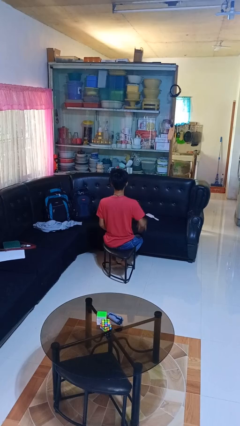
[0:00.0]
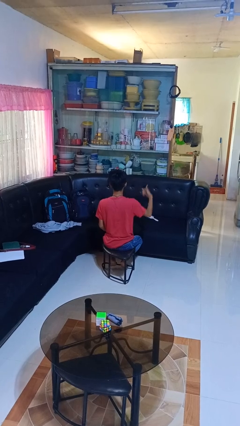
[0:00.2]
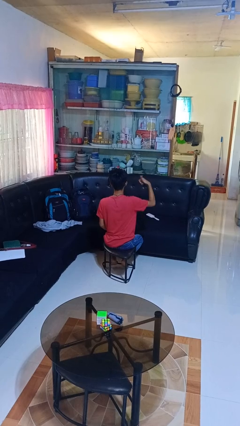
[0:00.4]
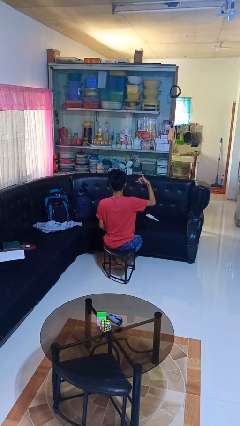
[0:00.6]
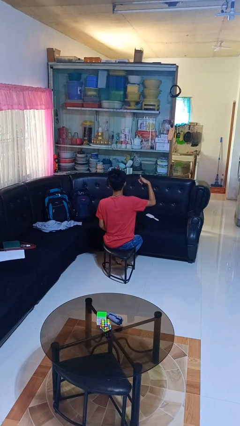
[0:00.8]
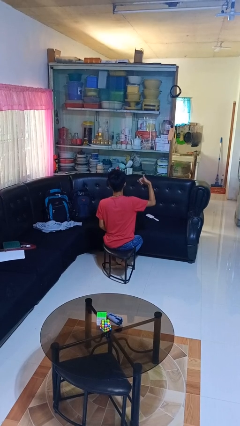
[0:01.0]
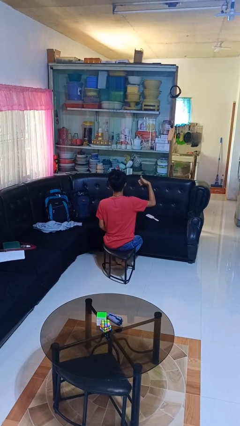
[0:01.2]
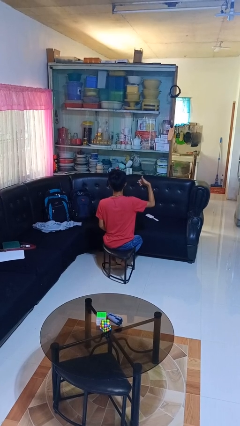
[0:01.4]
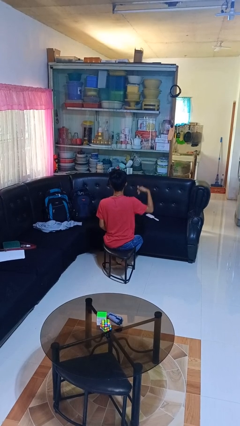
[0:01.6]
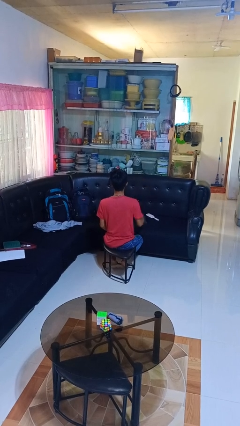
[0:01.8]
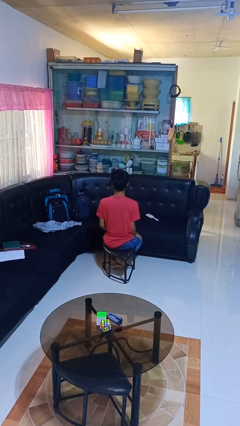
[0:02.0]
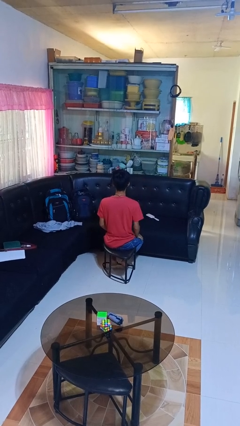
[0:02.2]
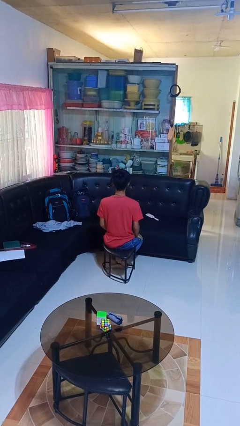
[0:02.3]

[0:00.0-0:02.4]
person gestures hang loose

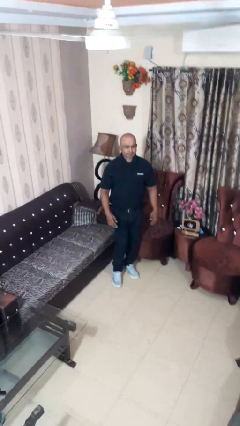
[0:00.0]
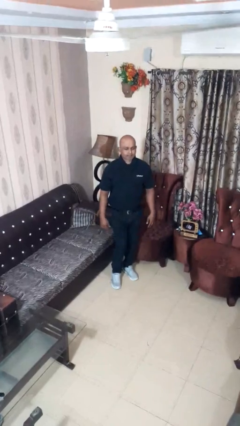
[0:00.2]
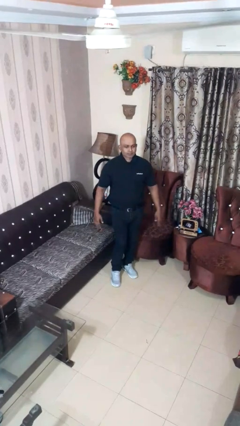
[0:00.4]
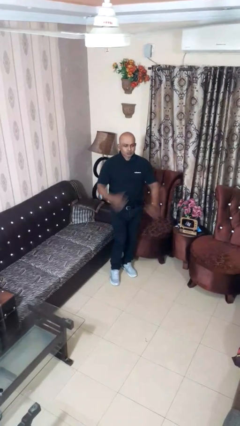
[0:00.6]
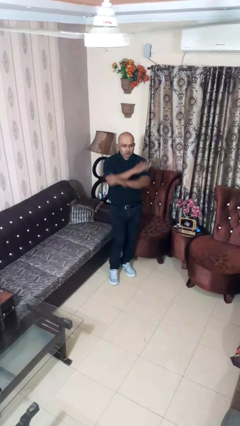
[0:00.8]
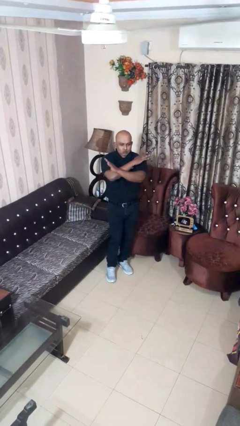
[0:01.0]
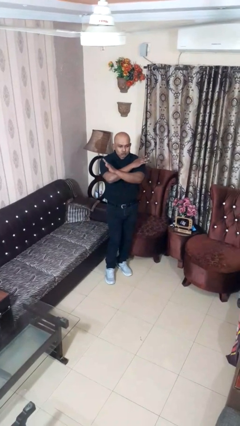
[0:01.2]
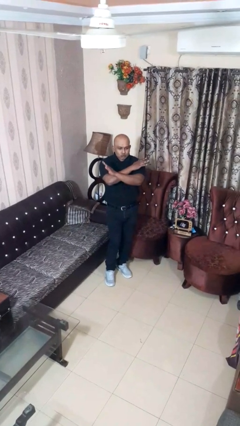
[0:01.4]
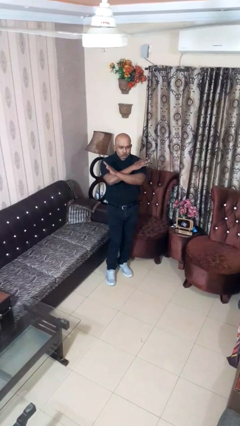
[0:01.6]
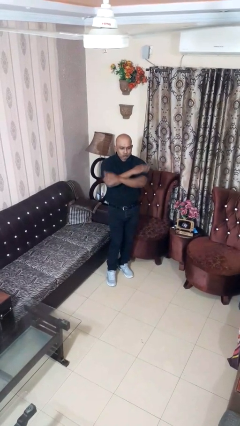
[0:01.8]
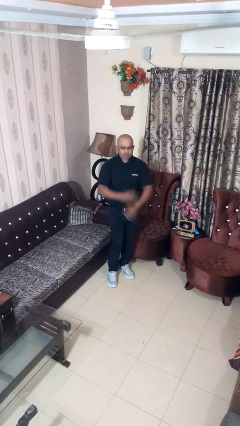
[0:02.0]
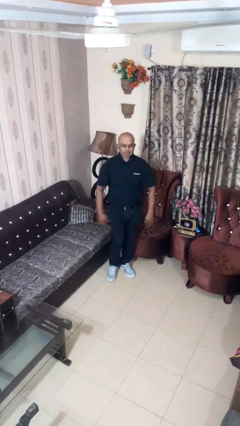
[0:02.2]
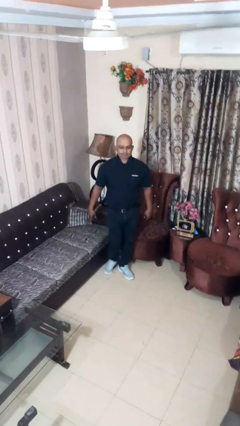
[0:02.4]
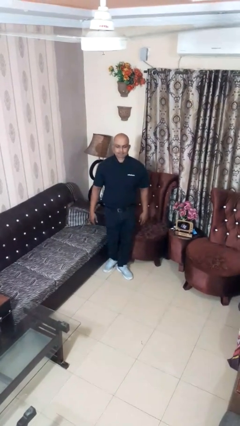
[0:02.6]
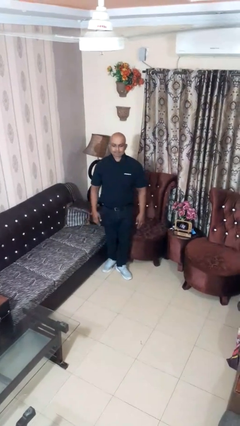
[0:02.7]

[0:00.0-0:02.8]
person gestures arms x

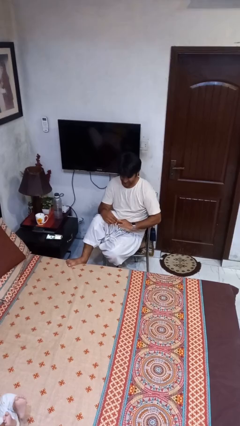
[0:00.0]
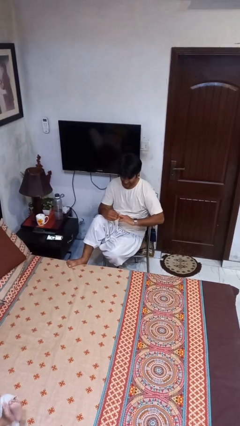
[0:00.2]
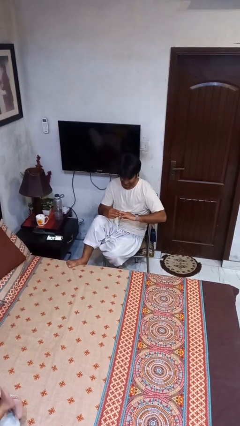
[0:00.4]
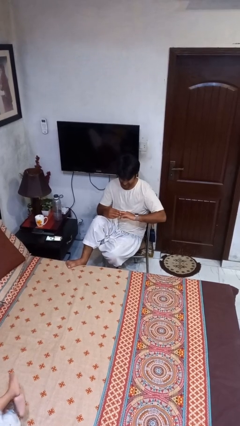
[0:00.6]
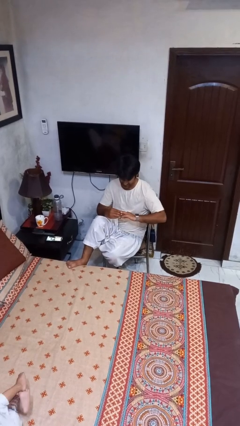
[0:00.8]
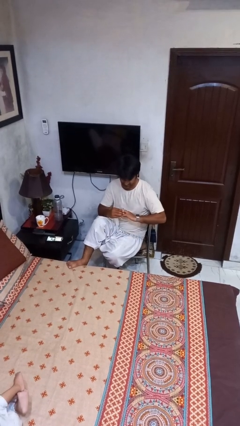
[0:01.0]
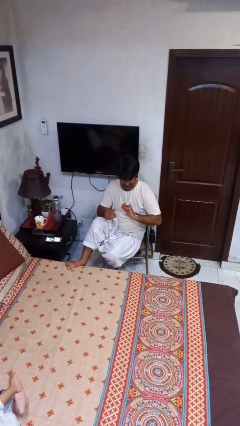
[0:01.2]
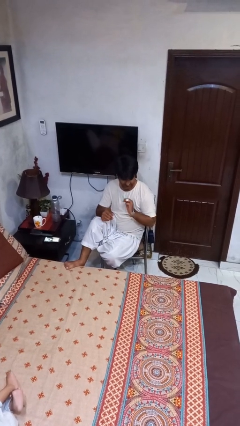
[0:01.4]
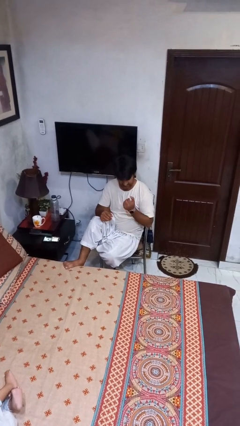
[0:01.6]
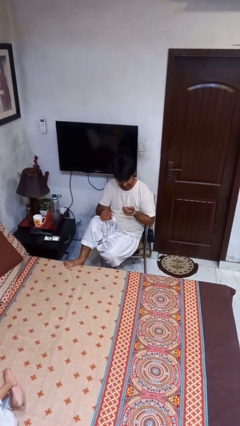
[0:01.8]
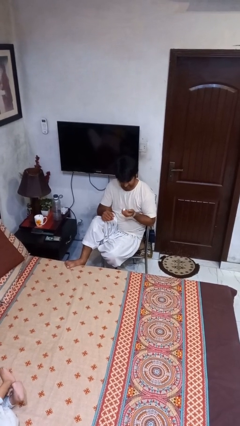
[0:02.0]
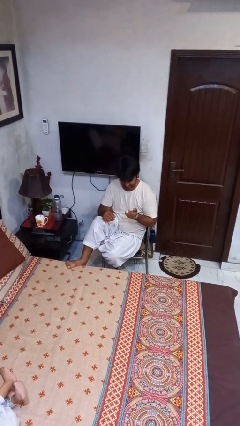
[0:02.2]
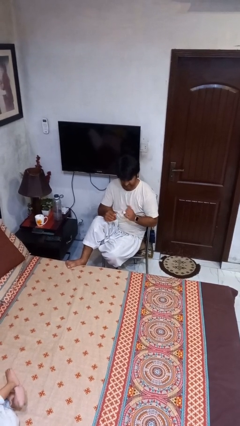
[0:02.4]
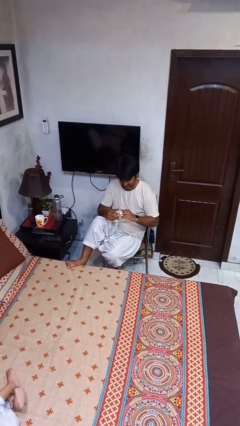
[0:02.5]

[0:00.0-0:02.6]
person puts on ring

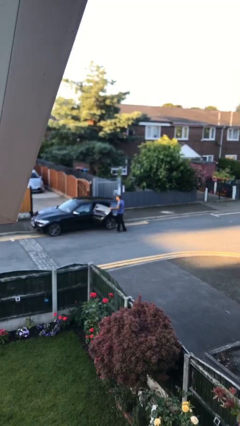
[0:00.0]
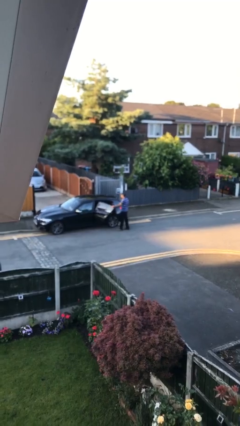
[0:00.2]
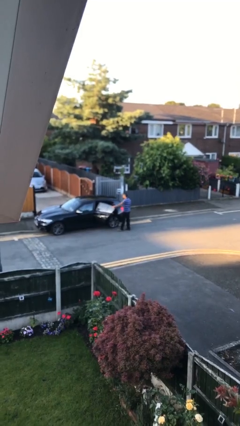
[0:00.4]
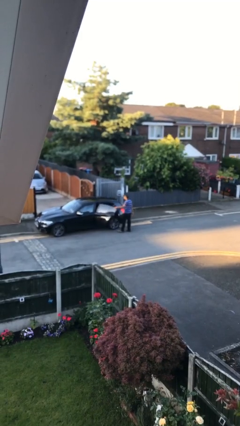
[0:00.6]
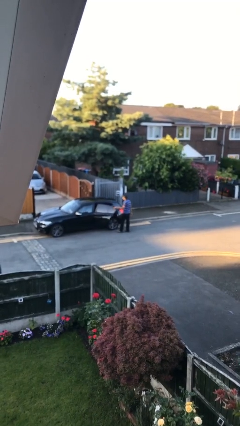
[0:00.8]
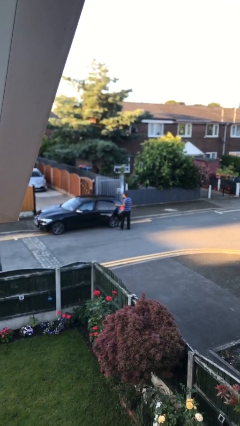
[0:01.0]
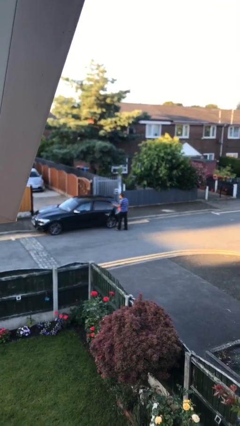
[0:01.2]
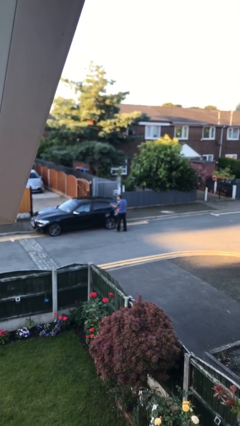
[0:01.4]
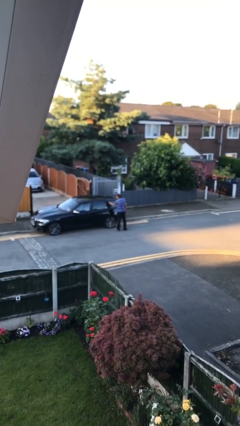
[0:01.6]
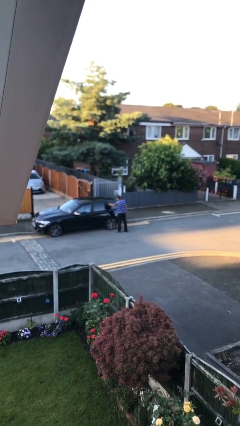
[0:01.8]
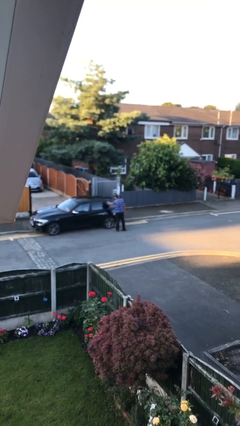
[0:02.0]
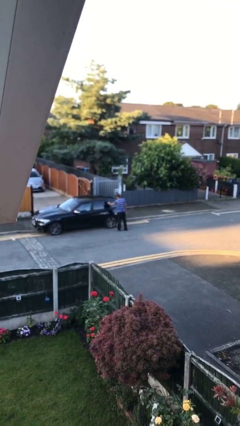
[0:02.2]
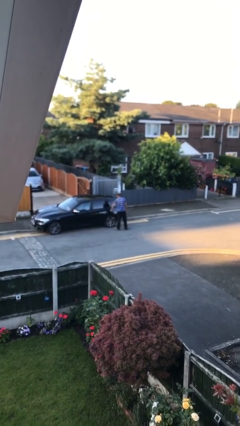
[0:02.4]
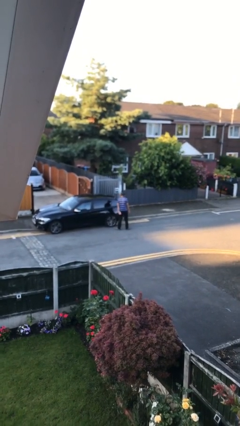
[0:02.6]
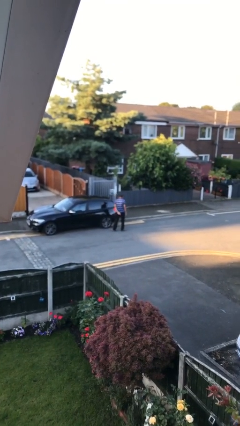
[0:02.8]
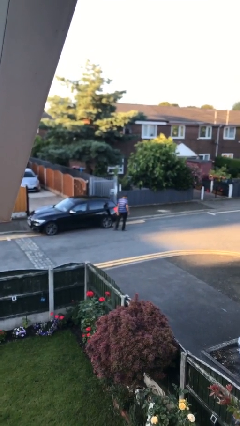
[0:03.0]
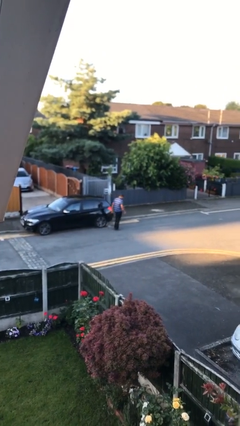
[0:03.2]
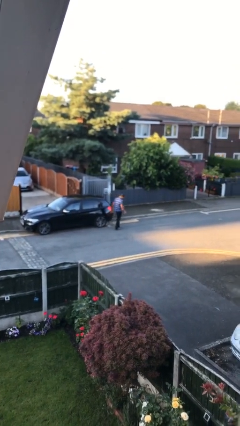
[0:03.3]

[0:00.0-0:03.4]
person closes car door

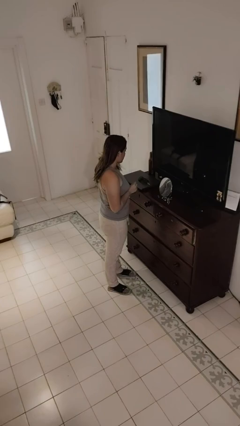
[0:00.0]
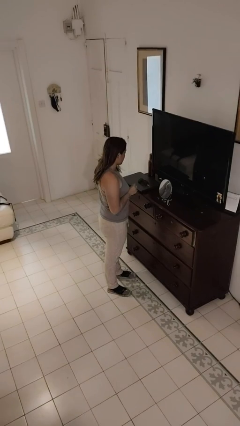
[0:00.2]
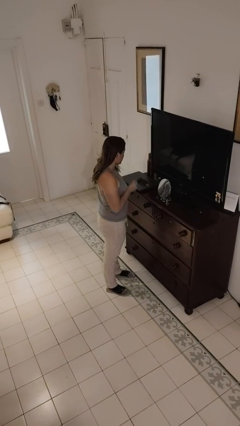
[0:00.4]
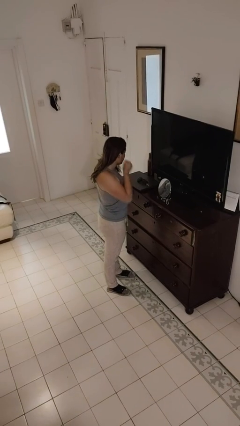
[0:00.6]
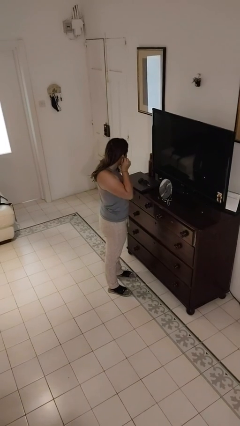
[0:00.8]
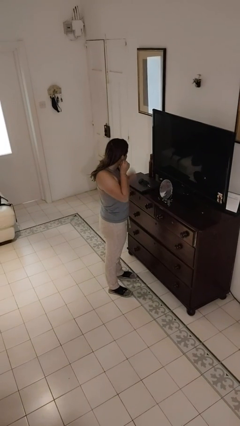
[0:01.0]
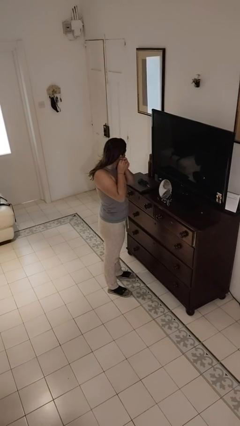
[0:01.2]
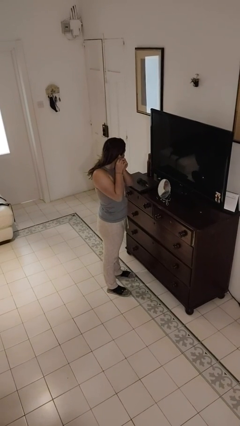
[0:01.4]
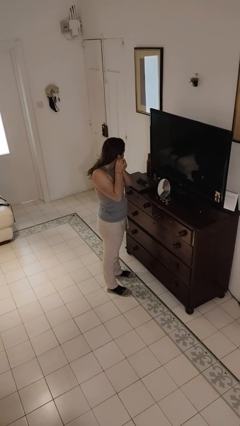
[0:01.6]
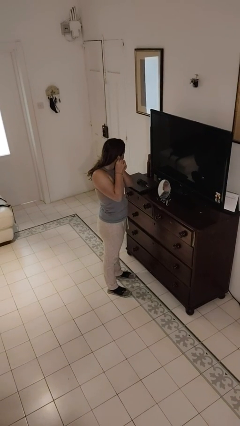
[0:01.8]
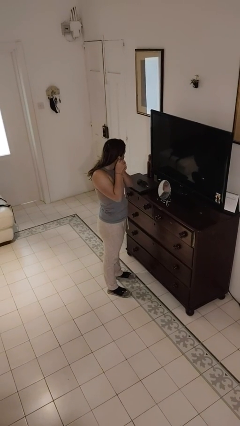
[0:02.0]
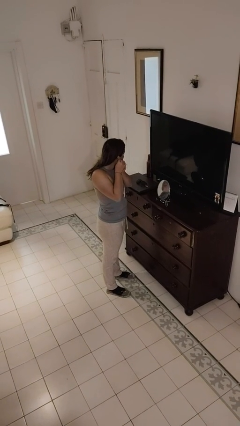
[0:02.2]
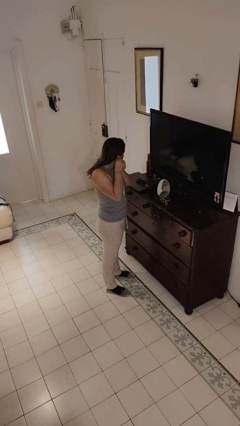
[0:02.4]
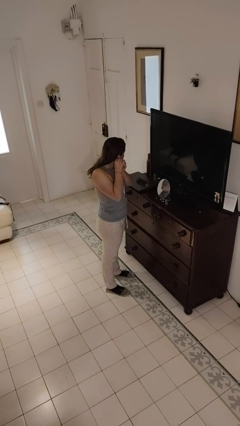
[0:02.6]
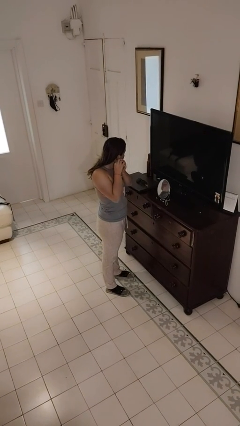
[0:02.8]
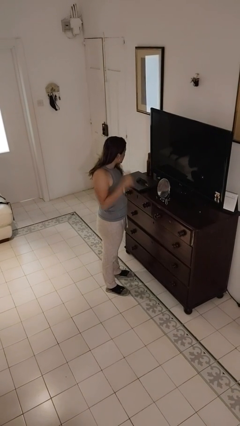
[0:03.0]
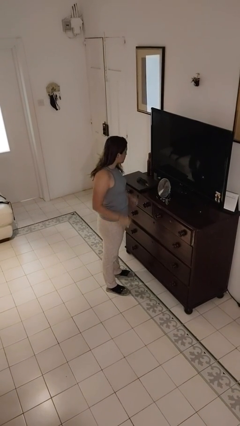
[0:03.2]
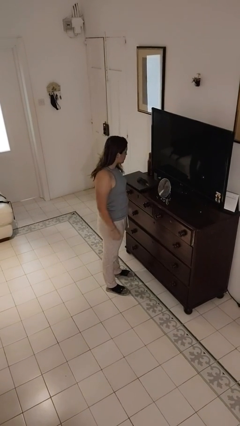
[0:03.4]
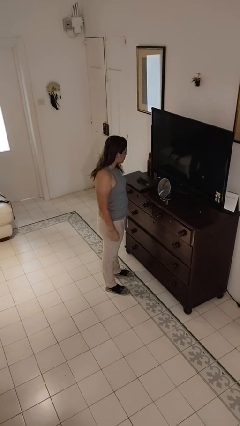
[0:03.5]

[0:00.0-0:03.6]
person puts on earrings

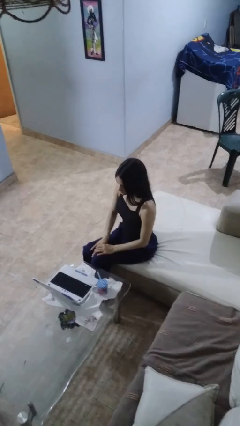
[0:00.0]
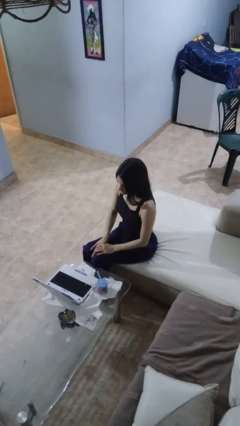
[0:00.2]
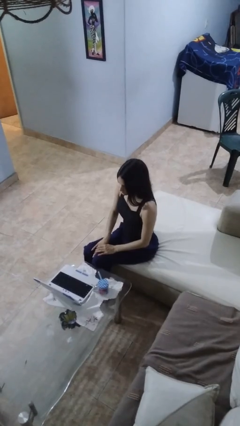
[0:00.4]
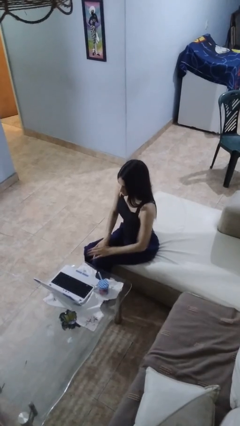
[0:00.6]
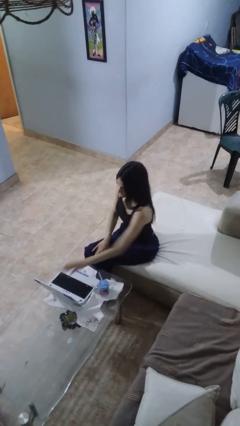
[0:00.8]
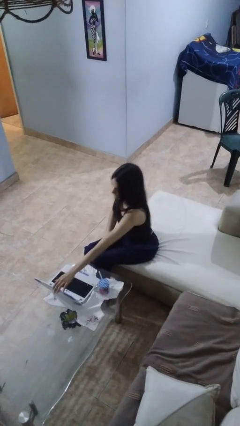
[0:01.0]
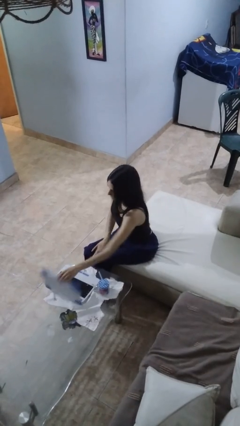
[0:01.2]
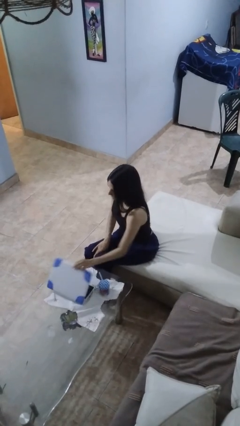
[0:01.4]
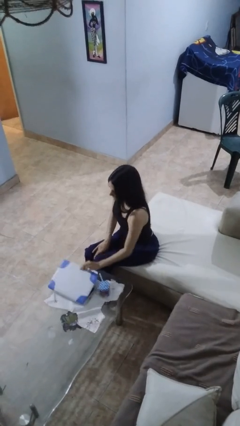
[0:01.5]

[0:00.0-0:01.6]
person closes laptop

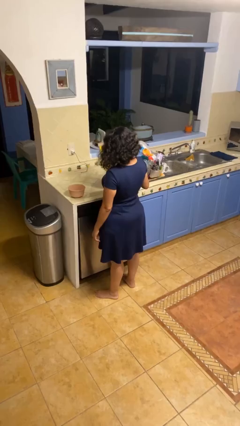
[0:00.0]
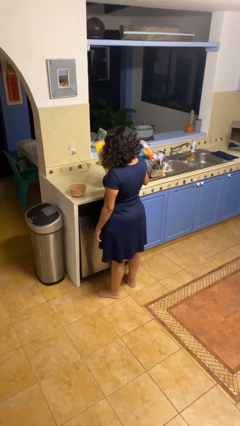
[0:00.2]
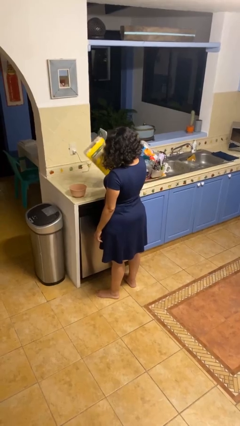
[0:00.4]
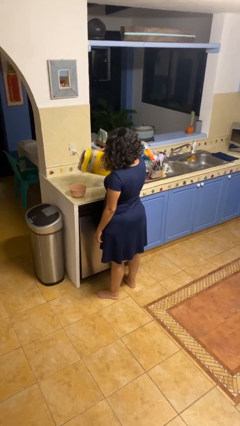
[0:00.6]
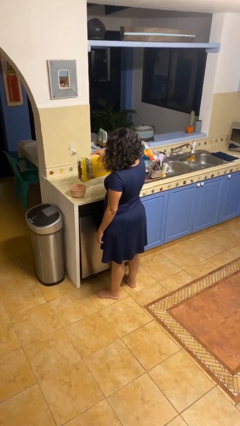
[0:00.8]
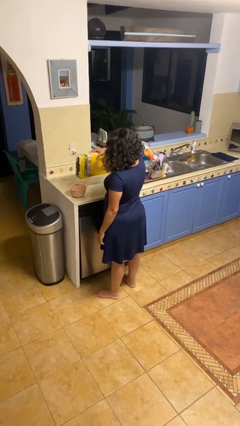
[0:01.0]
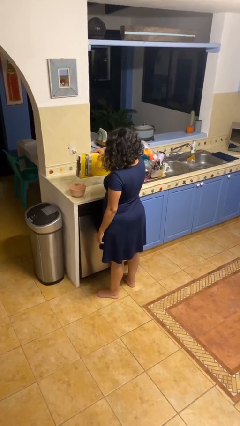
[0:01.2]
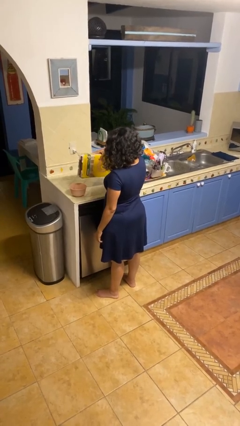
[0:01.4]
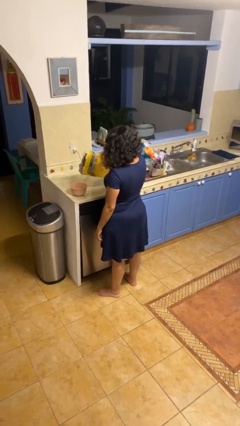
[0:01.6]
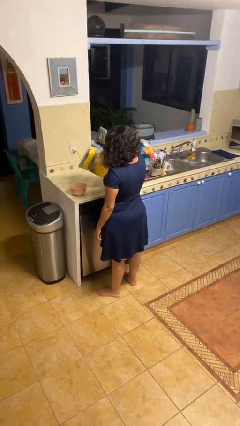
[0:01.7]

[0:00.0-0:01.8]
person pours into bowl
